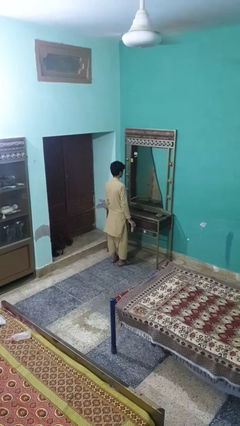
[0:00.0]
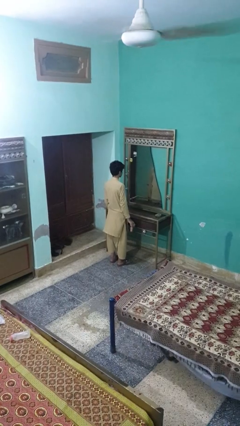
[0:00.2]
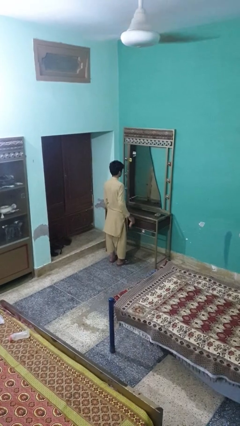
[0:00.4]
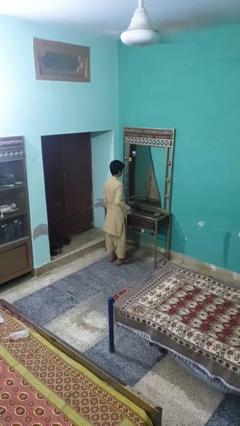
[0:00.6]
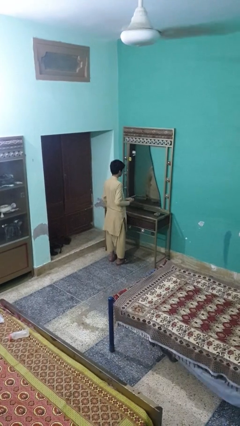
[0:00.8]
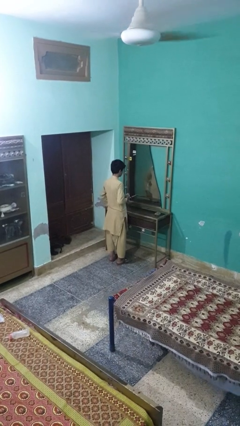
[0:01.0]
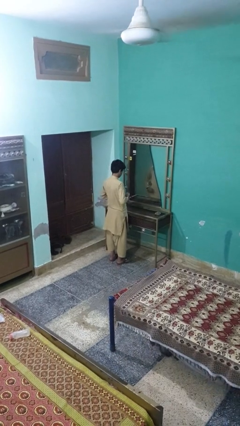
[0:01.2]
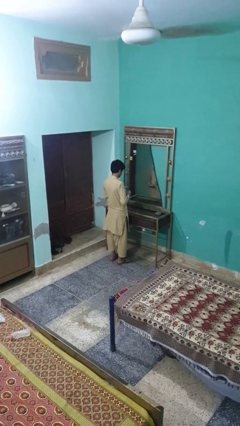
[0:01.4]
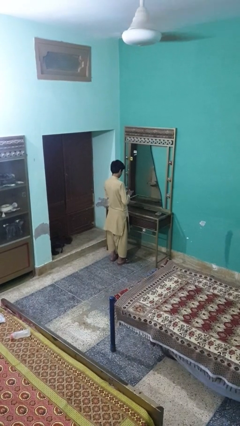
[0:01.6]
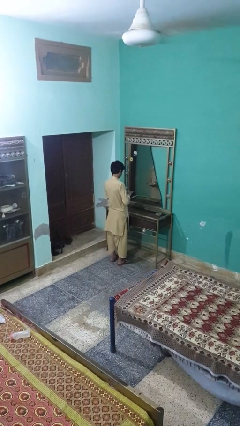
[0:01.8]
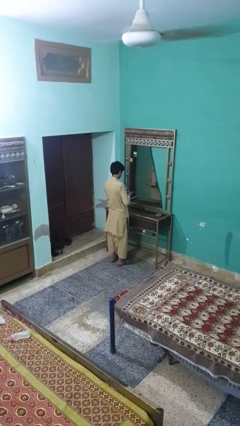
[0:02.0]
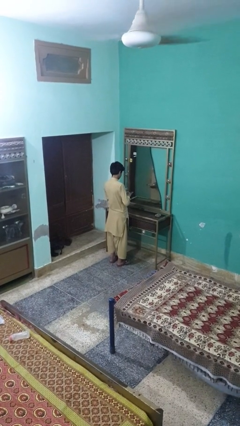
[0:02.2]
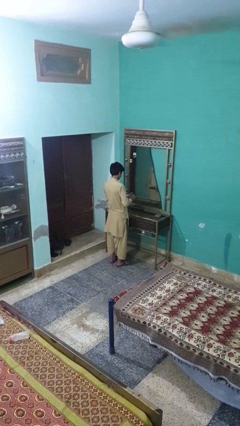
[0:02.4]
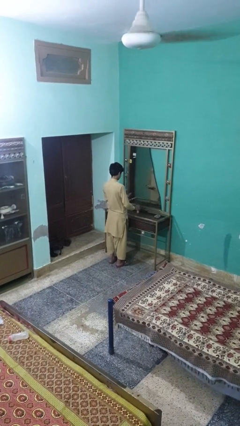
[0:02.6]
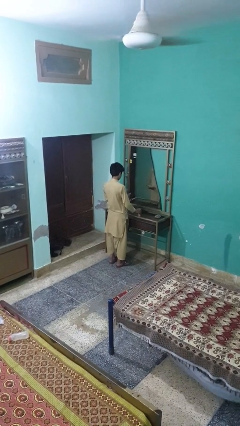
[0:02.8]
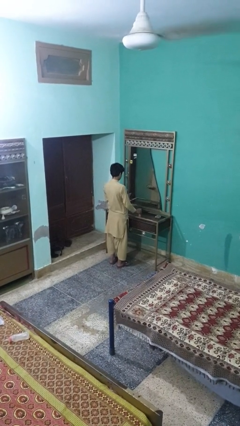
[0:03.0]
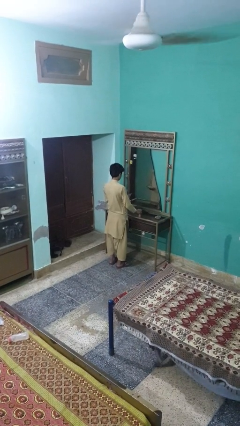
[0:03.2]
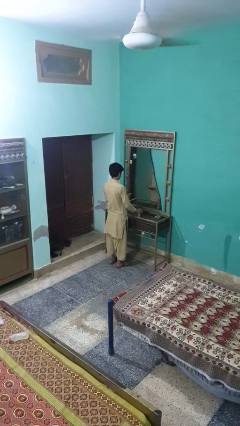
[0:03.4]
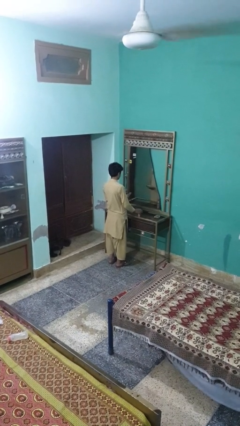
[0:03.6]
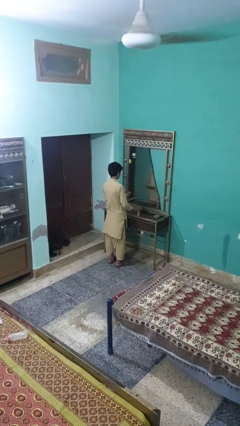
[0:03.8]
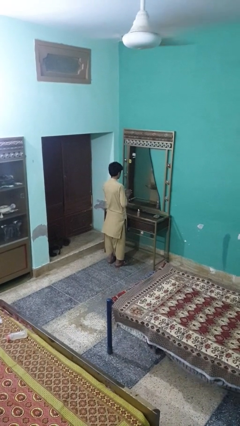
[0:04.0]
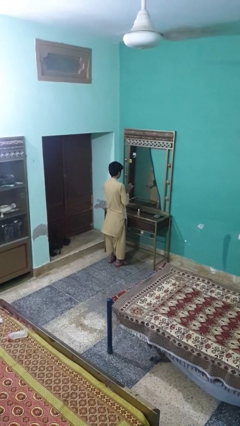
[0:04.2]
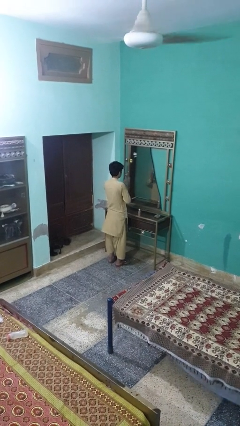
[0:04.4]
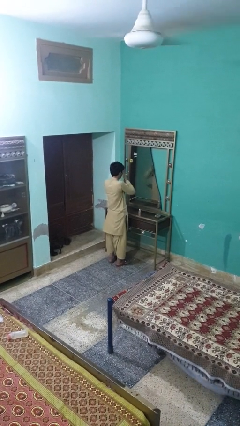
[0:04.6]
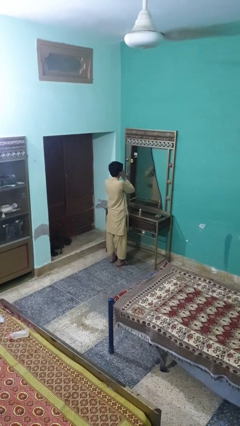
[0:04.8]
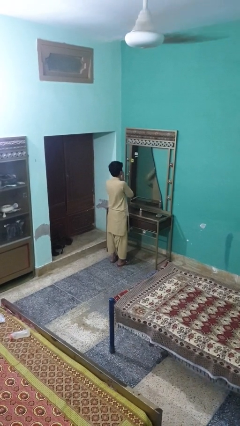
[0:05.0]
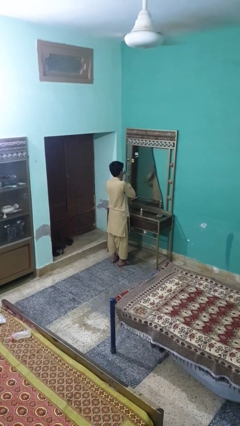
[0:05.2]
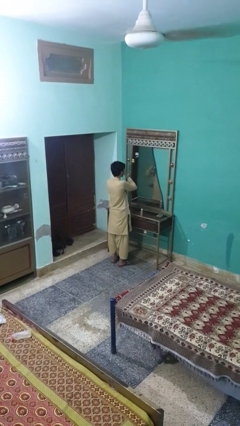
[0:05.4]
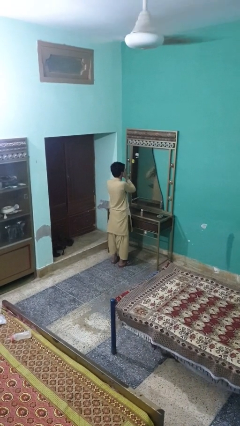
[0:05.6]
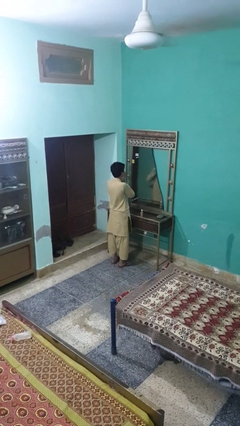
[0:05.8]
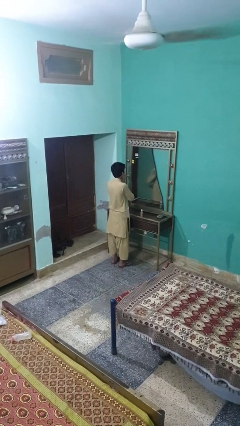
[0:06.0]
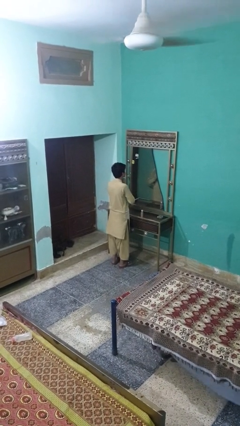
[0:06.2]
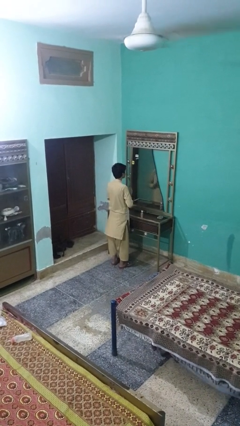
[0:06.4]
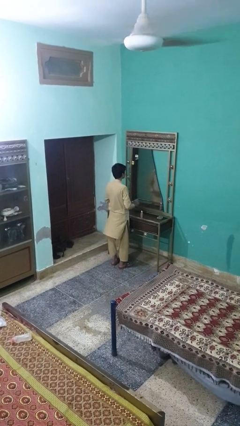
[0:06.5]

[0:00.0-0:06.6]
person applies foundation makeup

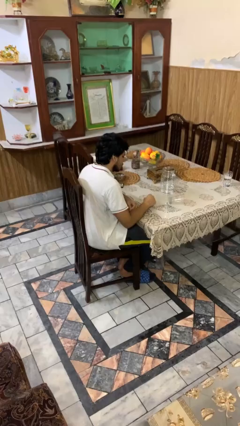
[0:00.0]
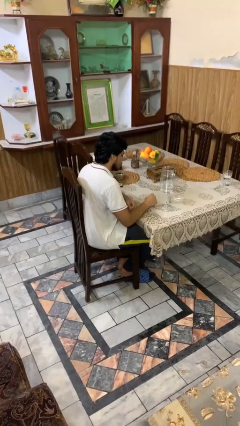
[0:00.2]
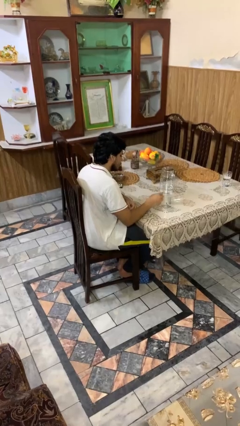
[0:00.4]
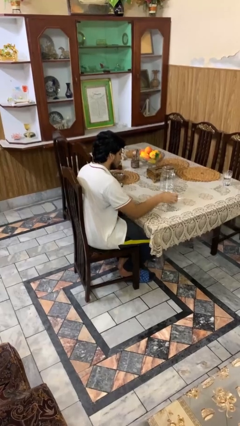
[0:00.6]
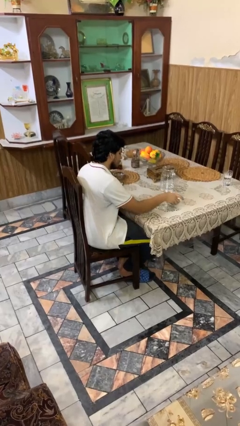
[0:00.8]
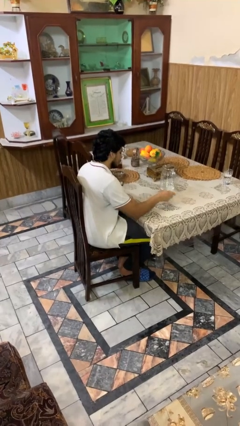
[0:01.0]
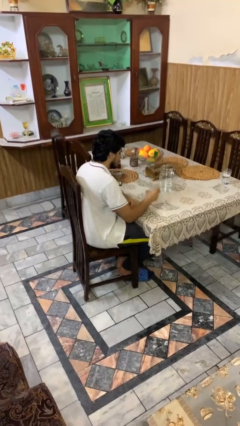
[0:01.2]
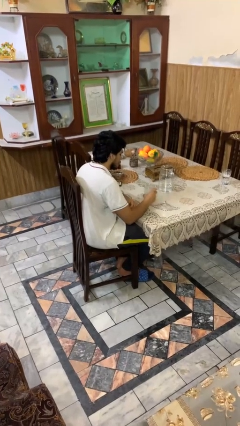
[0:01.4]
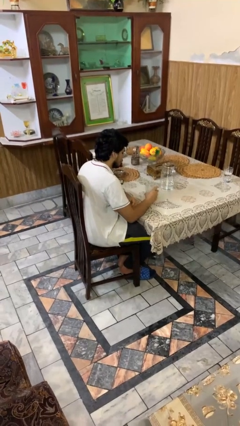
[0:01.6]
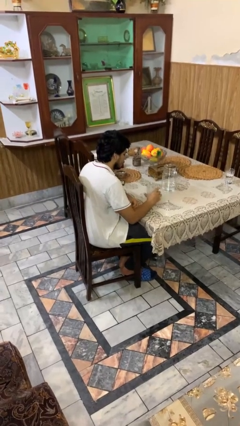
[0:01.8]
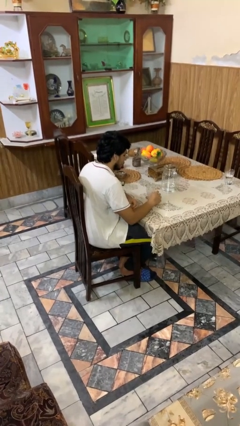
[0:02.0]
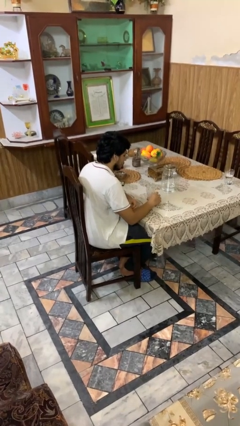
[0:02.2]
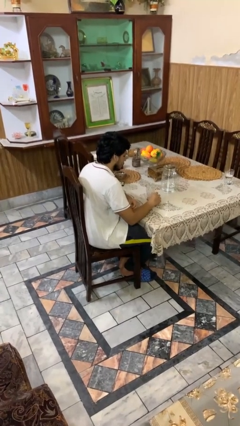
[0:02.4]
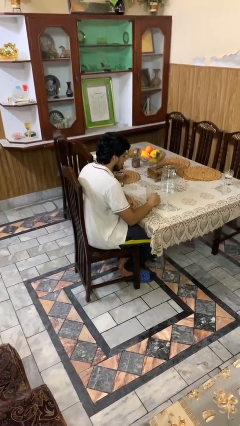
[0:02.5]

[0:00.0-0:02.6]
person sets upright glass

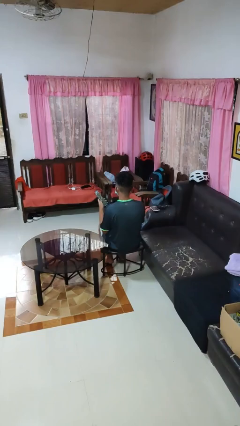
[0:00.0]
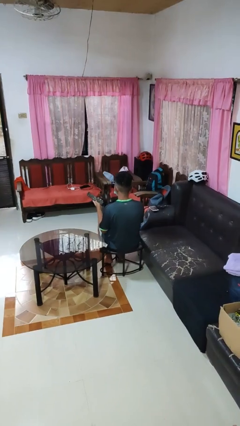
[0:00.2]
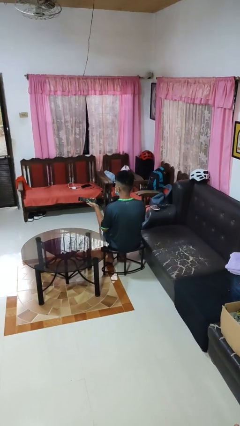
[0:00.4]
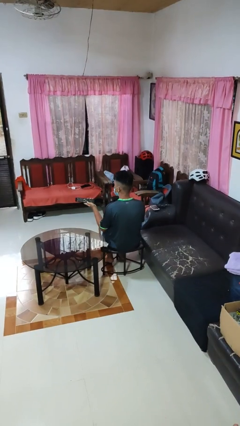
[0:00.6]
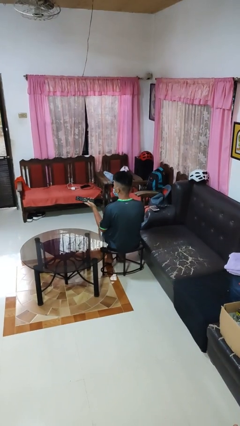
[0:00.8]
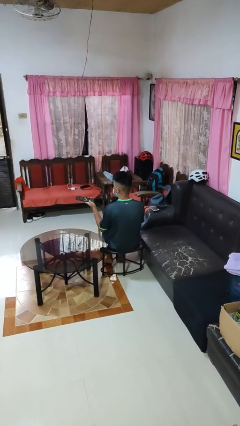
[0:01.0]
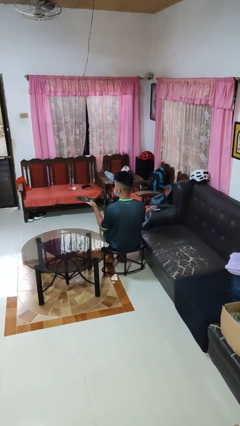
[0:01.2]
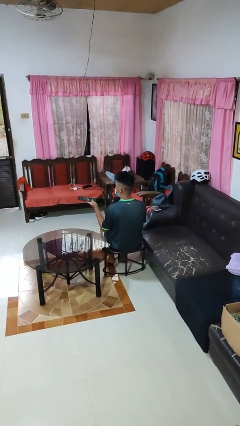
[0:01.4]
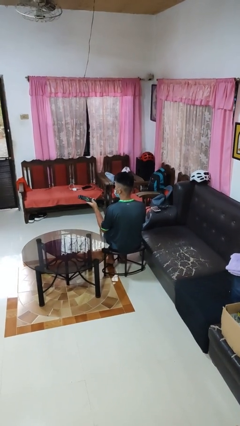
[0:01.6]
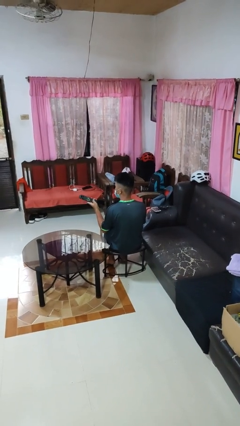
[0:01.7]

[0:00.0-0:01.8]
person uses television remote

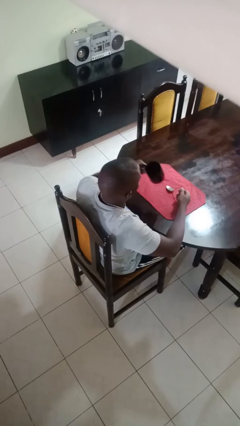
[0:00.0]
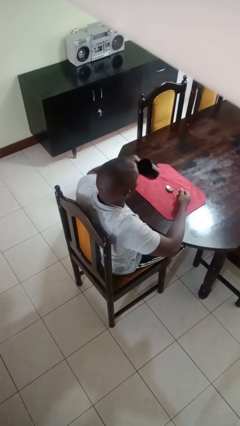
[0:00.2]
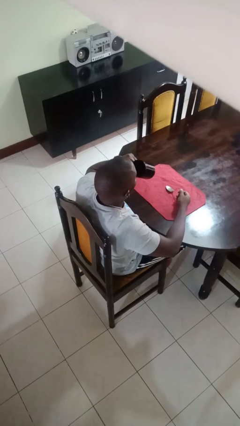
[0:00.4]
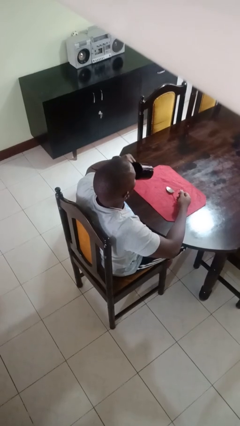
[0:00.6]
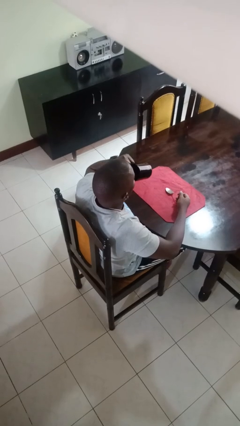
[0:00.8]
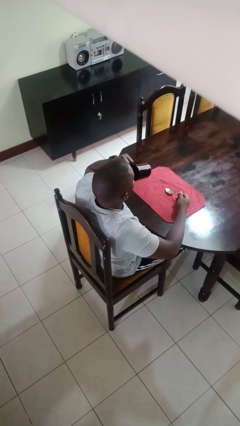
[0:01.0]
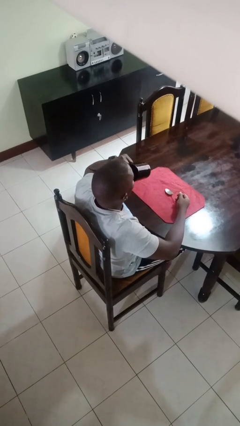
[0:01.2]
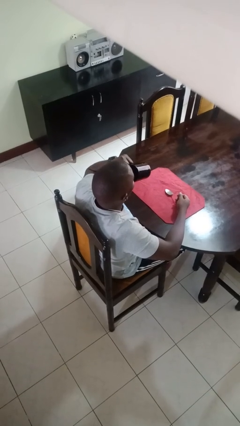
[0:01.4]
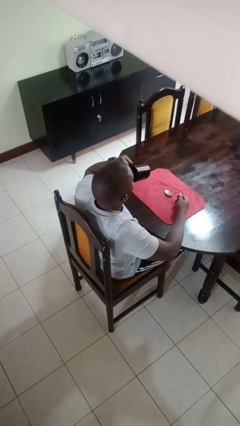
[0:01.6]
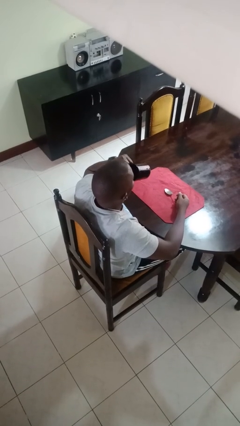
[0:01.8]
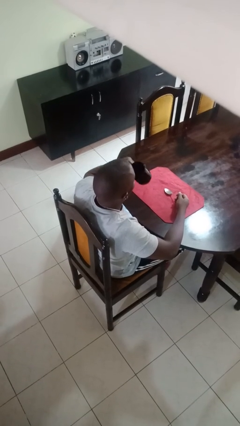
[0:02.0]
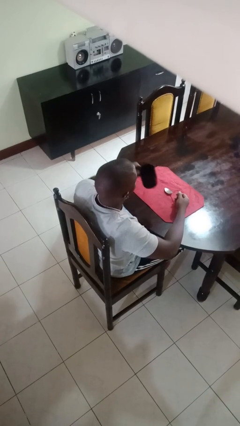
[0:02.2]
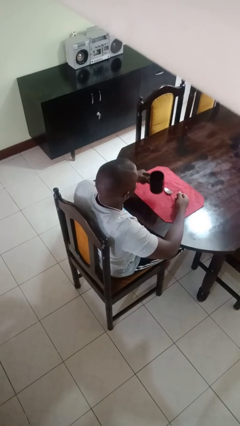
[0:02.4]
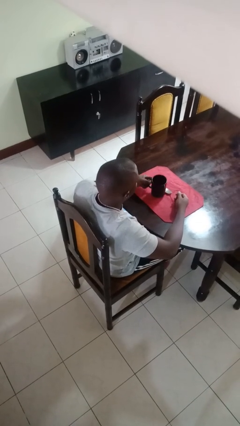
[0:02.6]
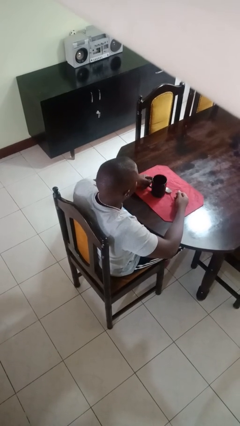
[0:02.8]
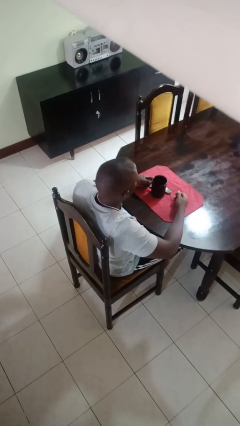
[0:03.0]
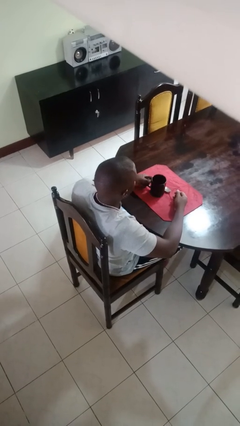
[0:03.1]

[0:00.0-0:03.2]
person drinks from mug

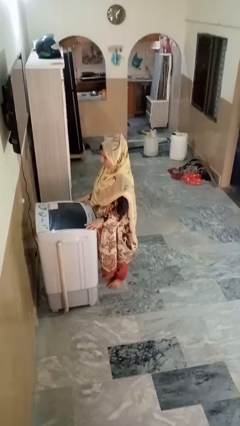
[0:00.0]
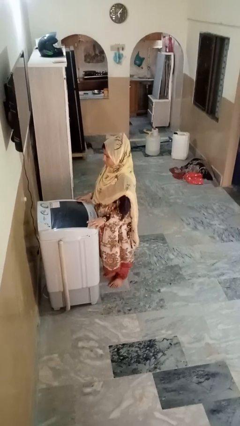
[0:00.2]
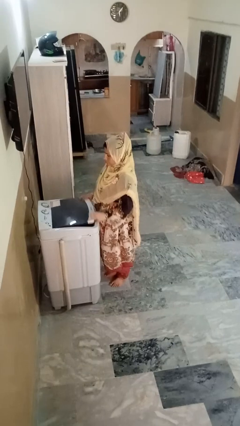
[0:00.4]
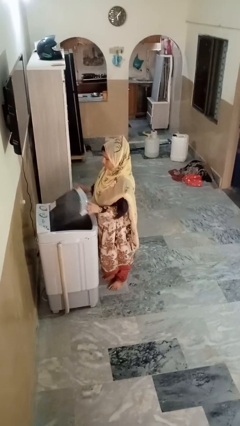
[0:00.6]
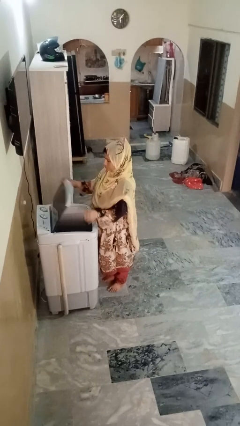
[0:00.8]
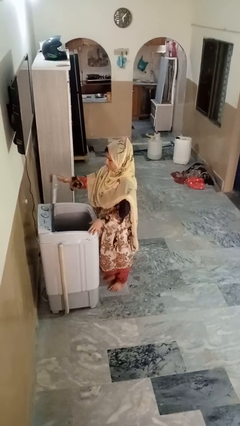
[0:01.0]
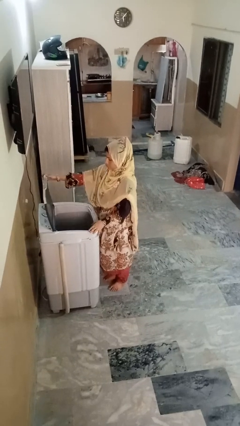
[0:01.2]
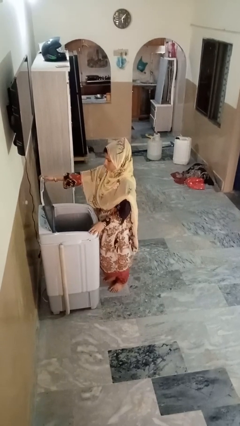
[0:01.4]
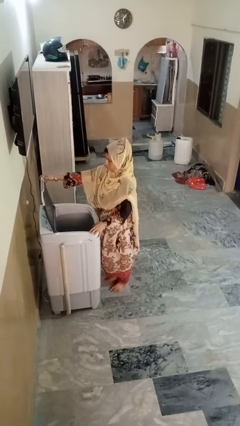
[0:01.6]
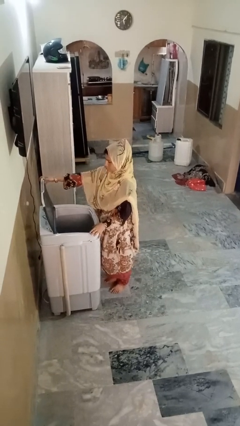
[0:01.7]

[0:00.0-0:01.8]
person opens clothes washer

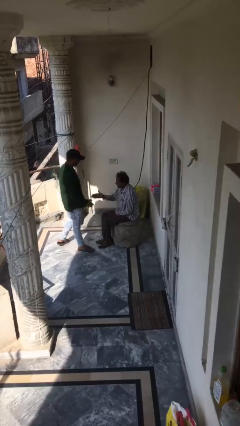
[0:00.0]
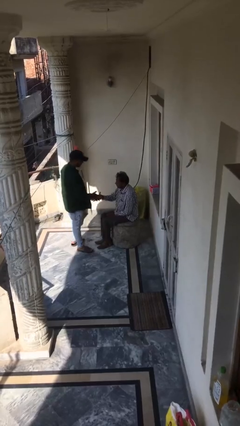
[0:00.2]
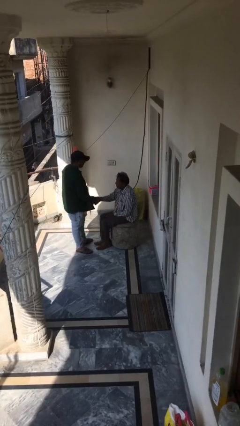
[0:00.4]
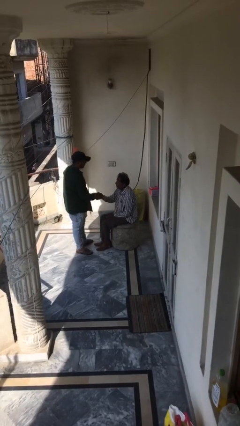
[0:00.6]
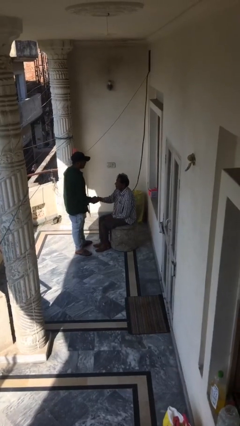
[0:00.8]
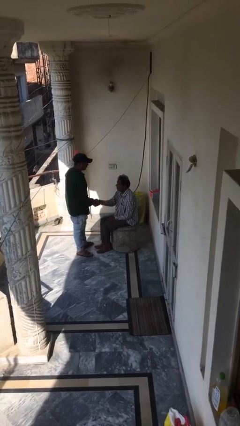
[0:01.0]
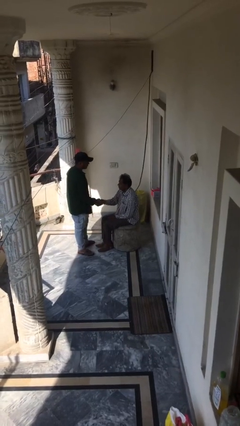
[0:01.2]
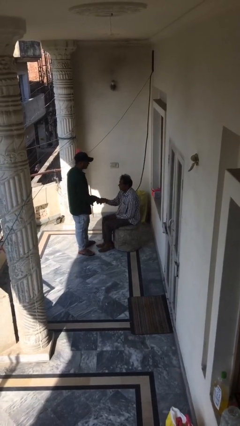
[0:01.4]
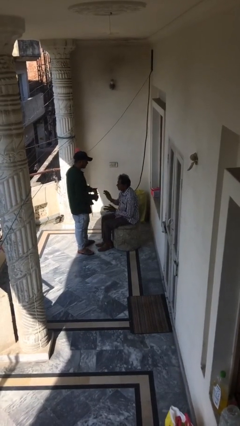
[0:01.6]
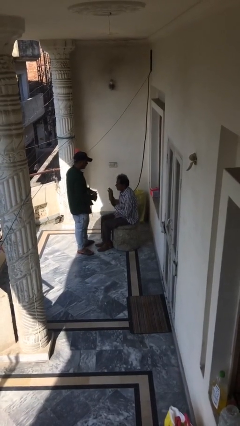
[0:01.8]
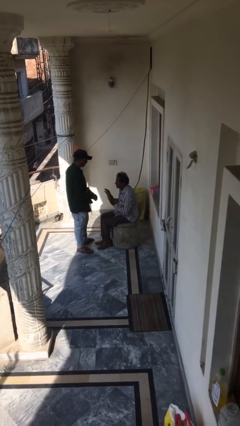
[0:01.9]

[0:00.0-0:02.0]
person shakes hand
